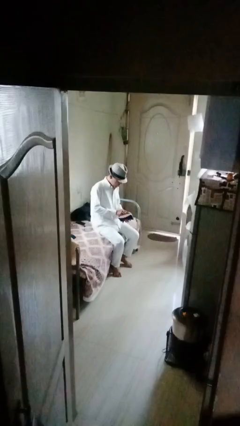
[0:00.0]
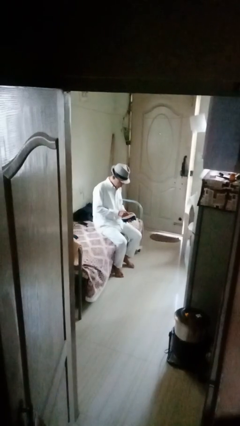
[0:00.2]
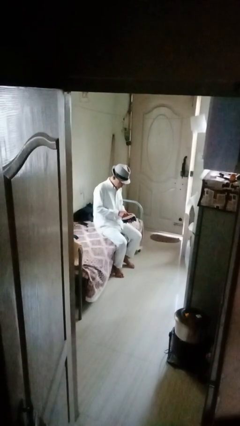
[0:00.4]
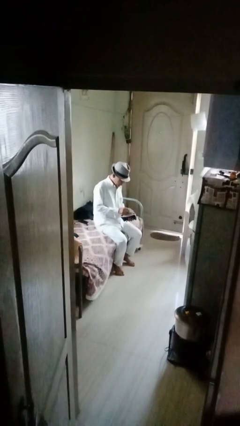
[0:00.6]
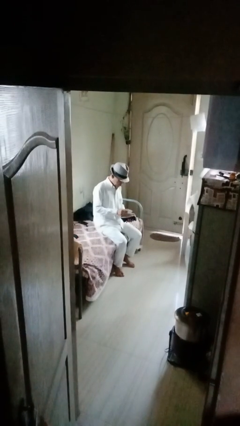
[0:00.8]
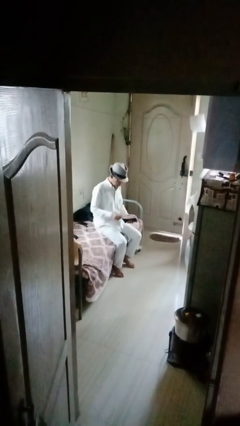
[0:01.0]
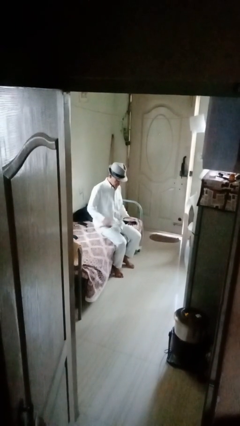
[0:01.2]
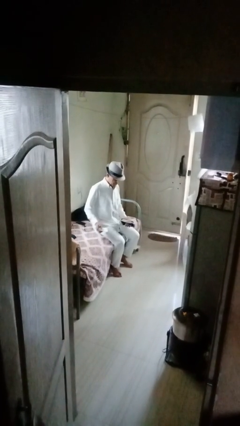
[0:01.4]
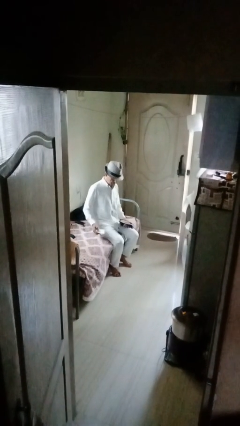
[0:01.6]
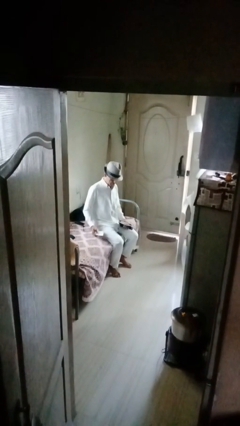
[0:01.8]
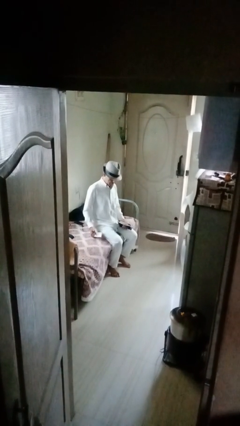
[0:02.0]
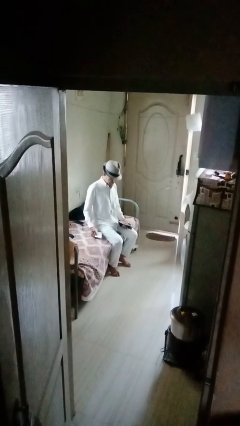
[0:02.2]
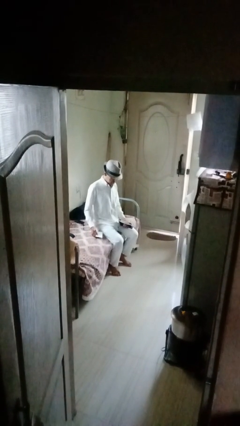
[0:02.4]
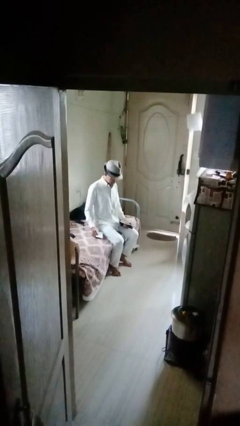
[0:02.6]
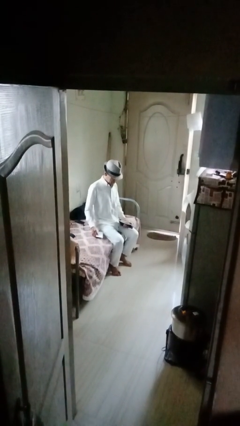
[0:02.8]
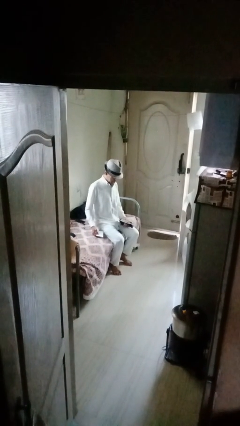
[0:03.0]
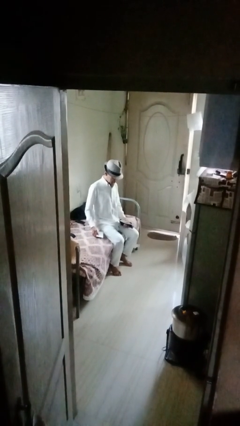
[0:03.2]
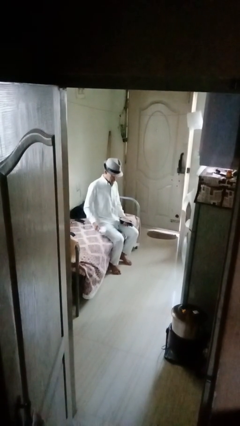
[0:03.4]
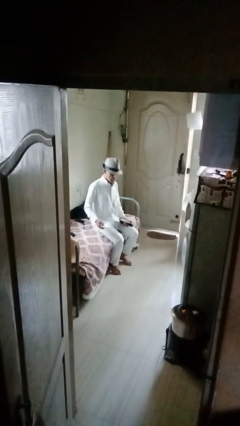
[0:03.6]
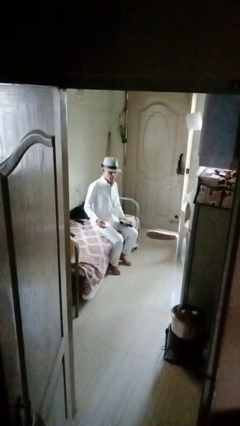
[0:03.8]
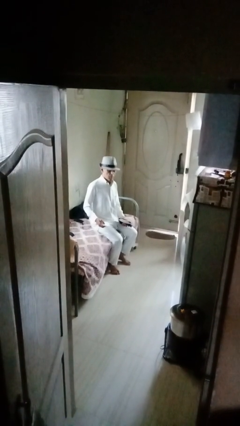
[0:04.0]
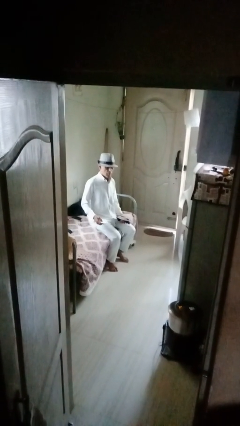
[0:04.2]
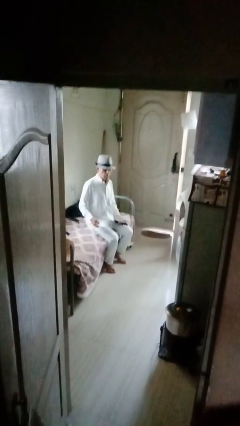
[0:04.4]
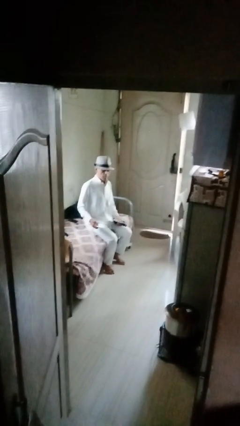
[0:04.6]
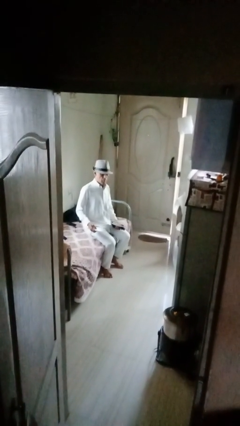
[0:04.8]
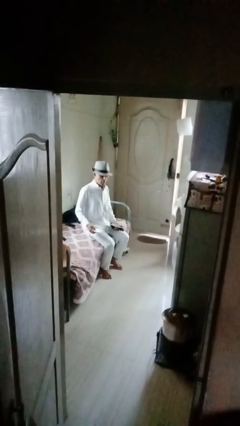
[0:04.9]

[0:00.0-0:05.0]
person takes object from purse

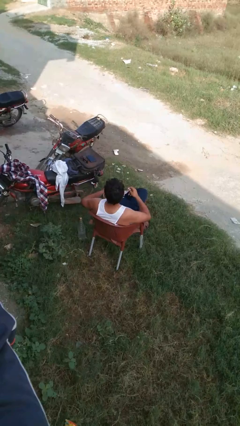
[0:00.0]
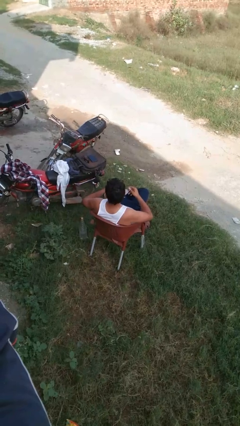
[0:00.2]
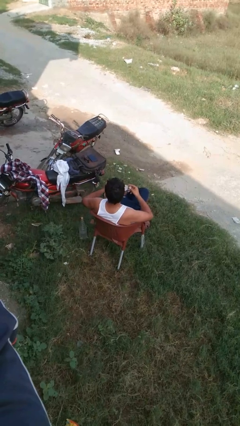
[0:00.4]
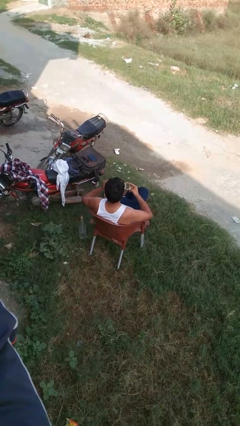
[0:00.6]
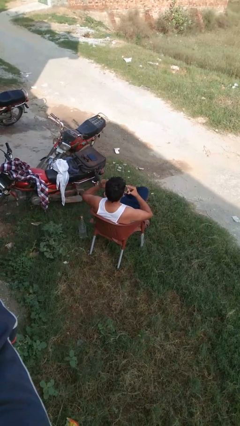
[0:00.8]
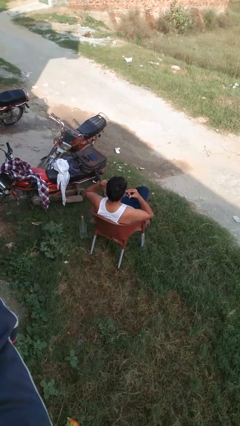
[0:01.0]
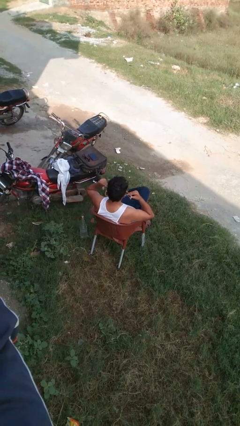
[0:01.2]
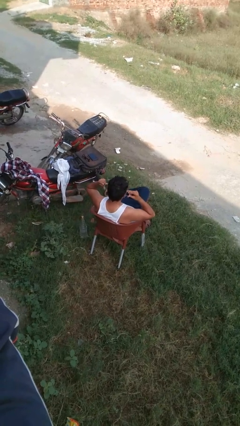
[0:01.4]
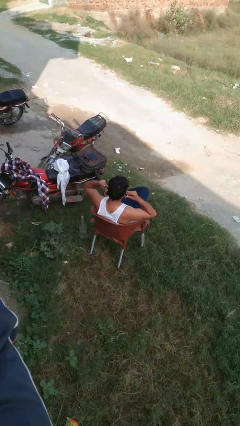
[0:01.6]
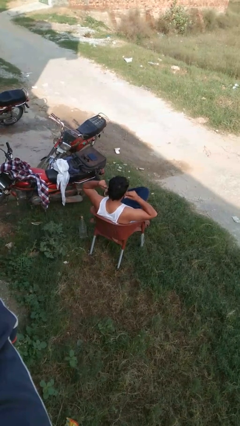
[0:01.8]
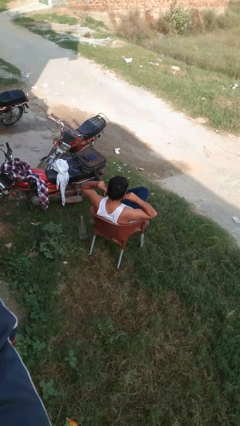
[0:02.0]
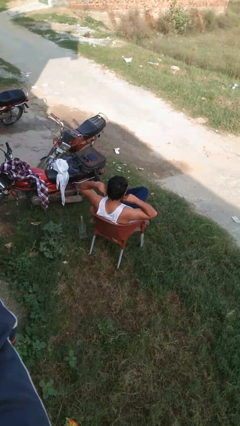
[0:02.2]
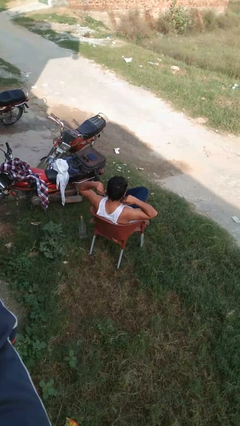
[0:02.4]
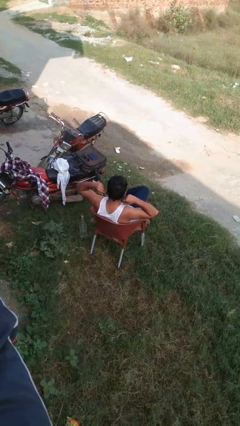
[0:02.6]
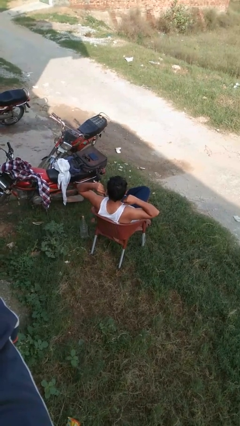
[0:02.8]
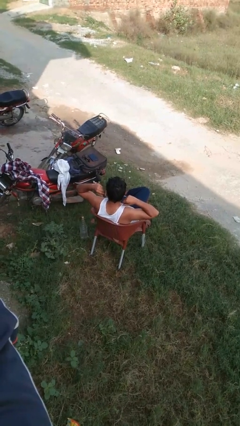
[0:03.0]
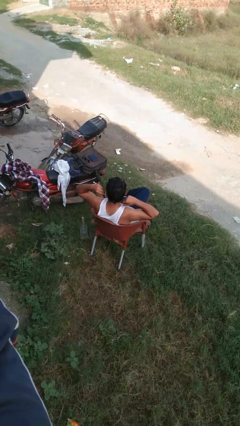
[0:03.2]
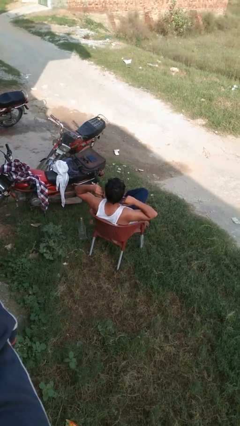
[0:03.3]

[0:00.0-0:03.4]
person puts on facemask

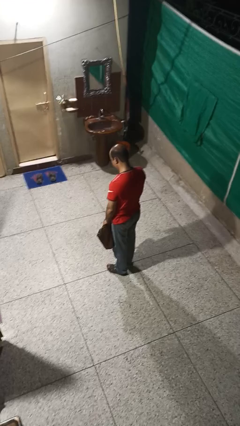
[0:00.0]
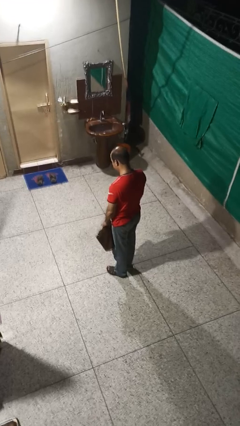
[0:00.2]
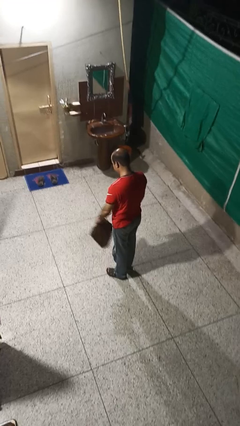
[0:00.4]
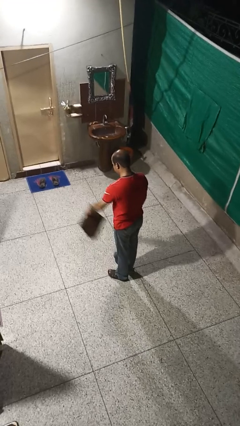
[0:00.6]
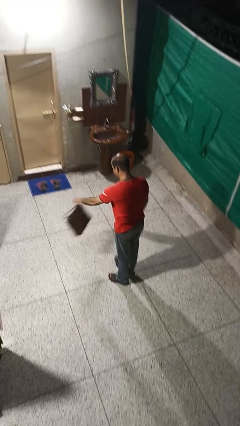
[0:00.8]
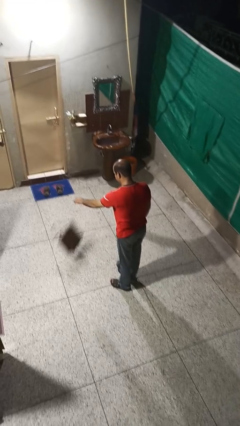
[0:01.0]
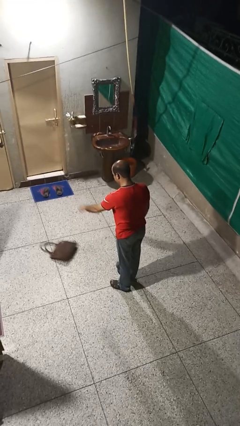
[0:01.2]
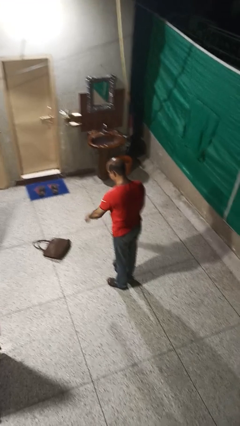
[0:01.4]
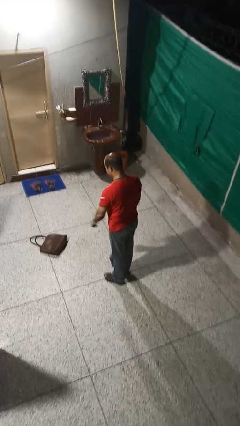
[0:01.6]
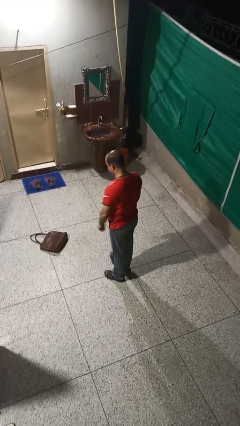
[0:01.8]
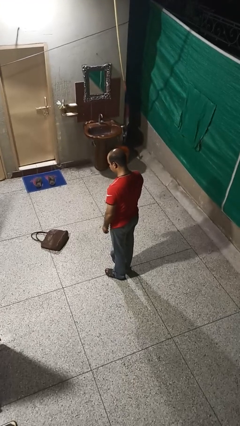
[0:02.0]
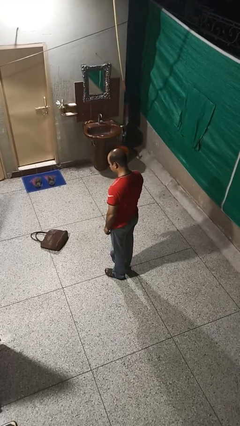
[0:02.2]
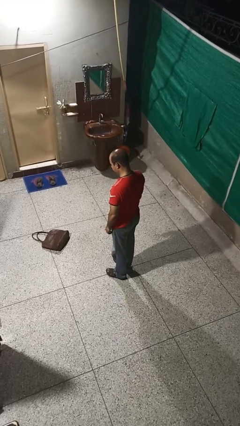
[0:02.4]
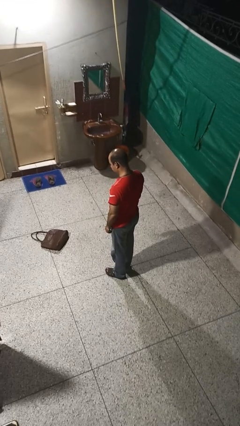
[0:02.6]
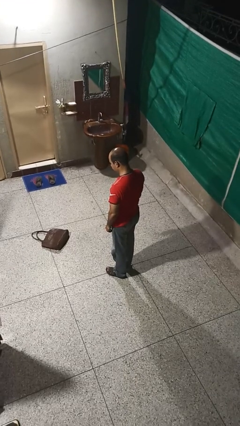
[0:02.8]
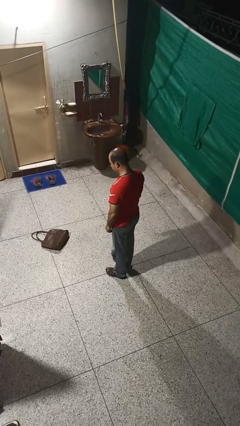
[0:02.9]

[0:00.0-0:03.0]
person throws object to ground

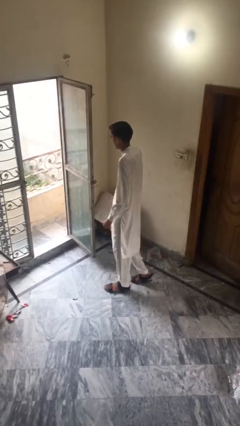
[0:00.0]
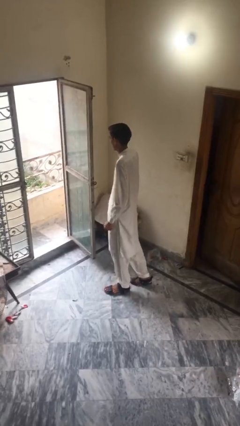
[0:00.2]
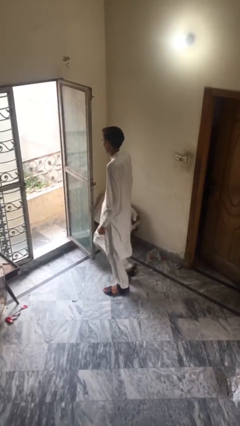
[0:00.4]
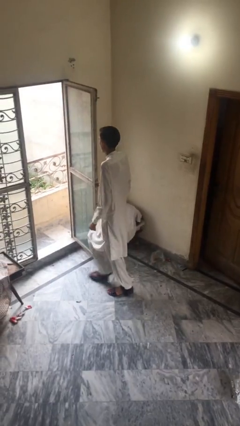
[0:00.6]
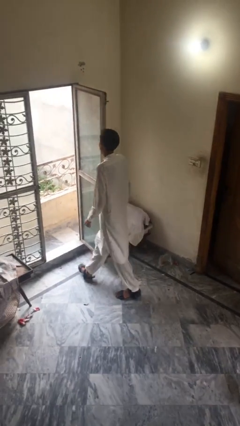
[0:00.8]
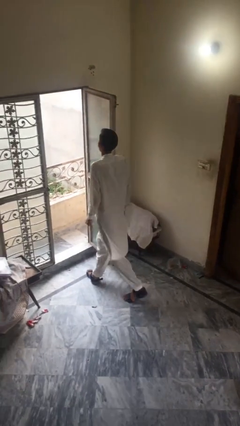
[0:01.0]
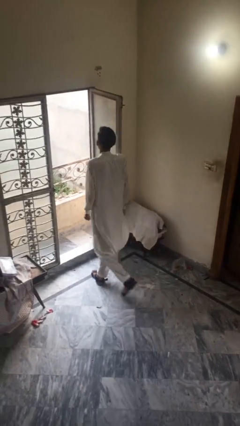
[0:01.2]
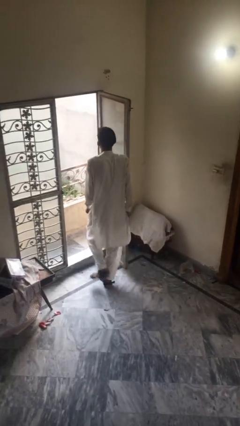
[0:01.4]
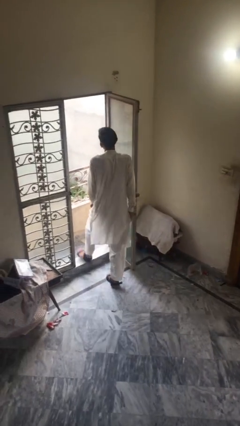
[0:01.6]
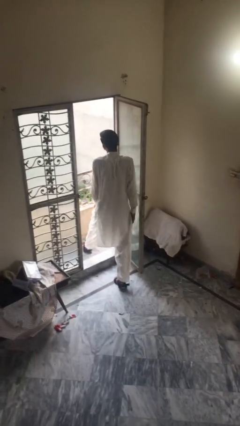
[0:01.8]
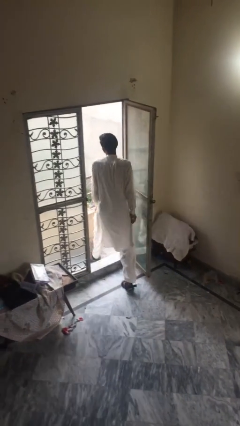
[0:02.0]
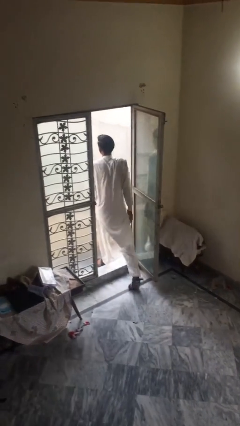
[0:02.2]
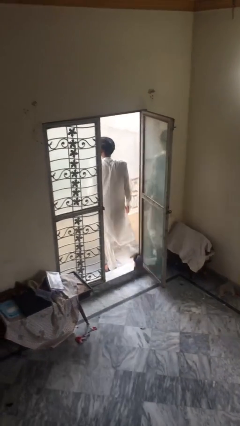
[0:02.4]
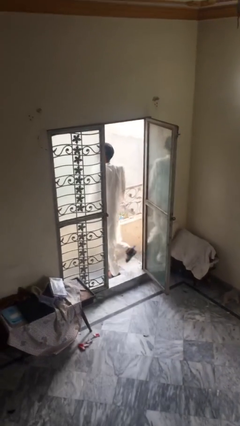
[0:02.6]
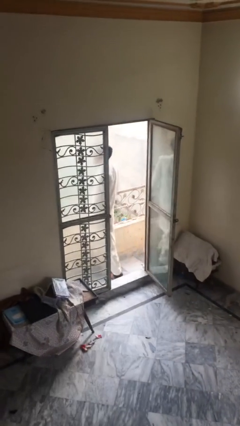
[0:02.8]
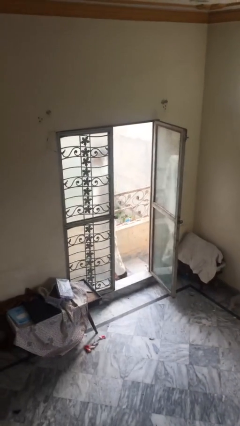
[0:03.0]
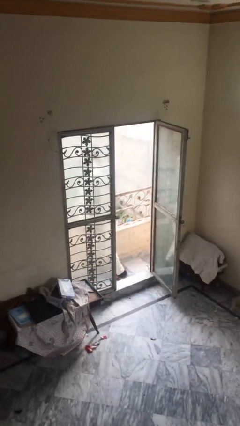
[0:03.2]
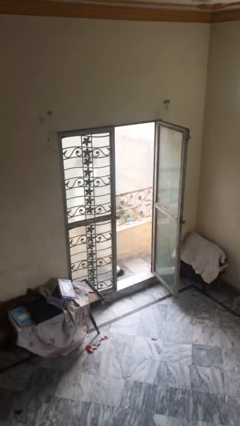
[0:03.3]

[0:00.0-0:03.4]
person exits scene through structure

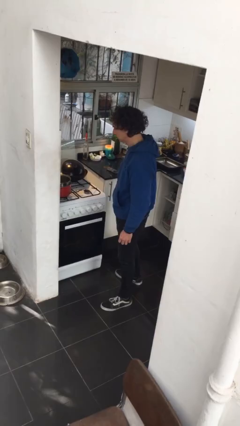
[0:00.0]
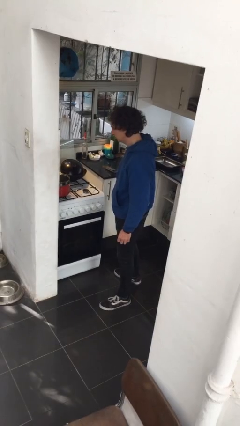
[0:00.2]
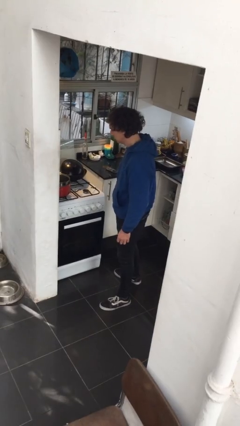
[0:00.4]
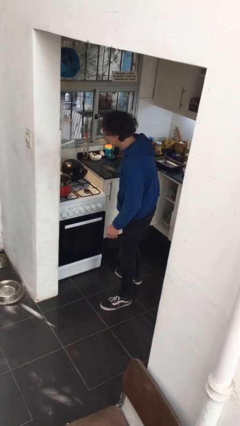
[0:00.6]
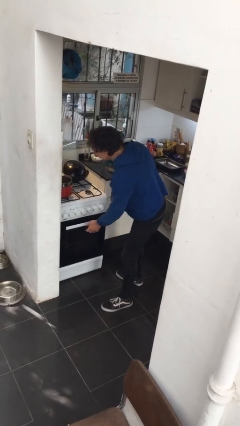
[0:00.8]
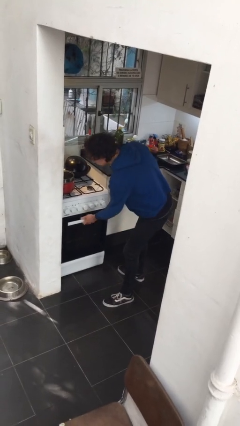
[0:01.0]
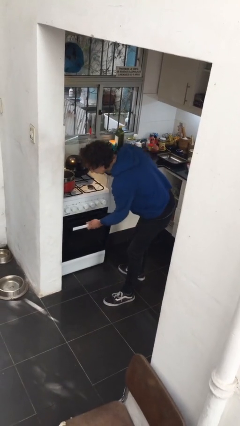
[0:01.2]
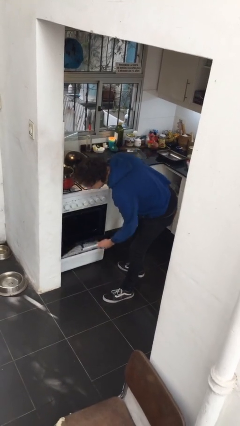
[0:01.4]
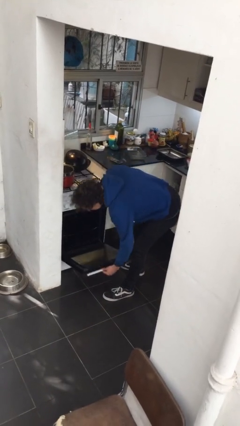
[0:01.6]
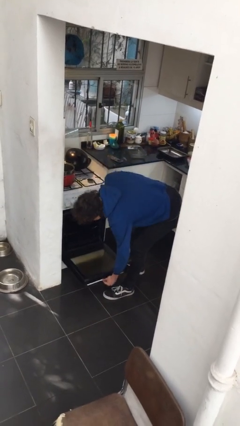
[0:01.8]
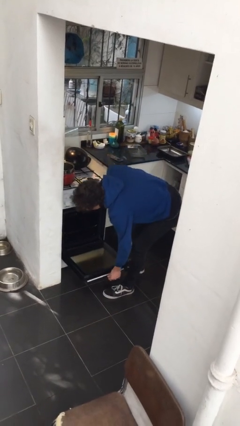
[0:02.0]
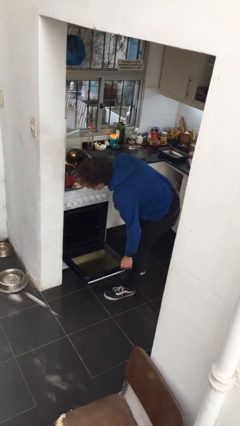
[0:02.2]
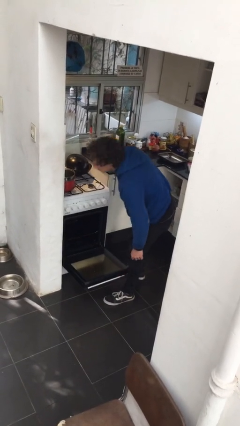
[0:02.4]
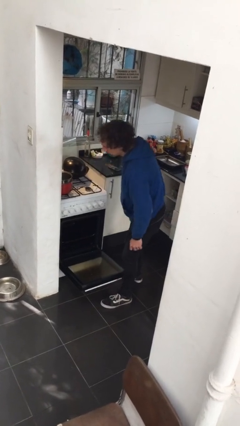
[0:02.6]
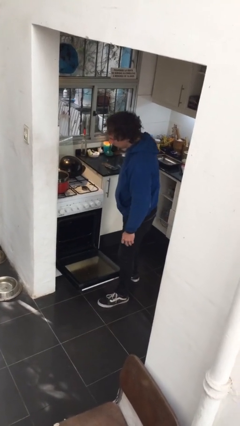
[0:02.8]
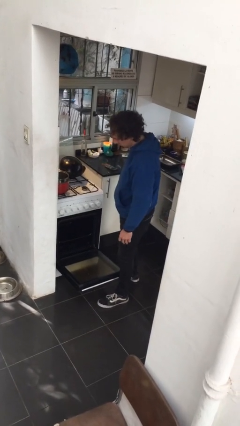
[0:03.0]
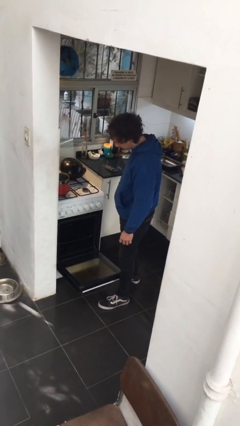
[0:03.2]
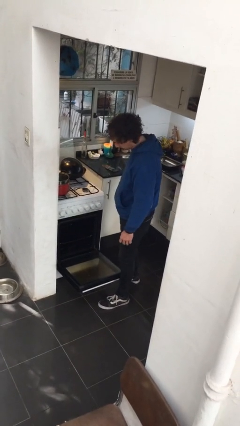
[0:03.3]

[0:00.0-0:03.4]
person opens oven door
